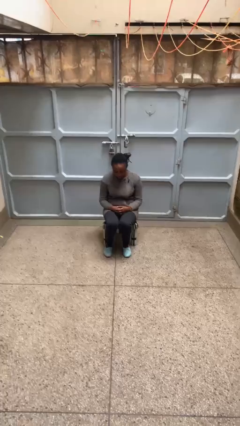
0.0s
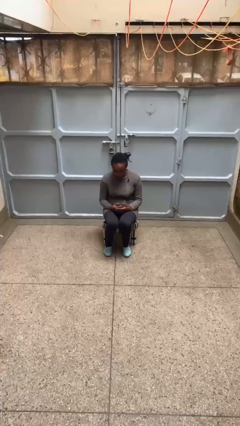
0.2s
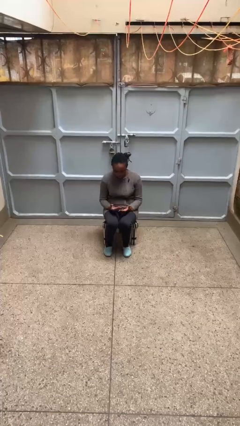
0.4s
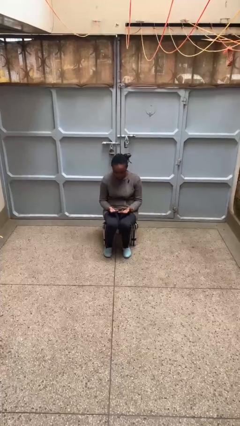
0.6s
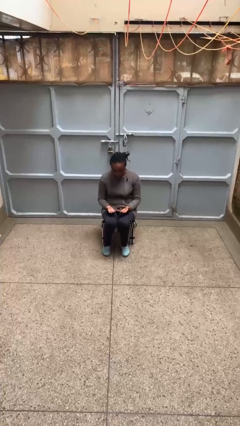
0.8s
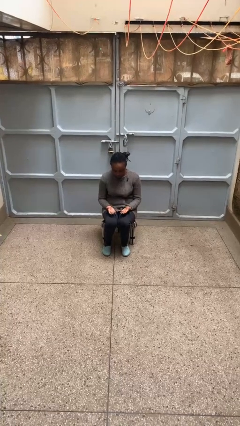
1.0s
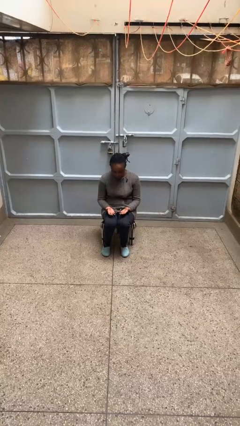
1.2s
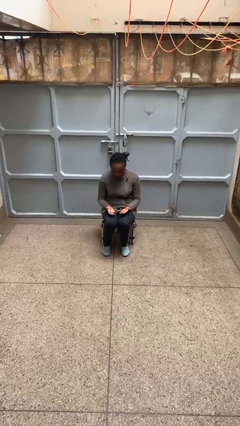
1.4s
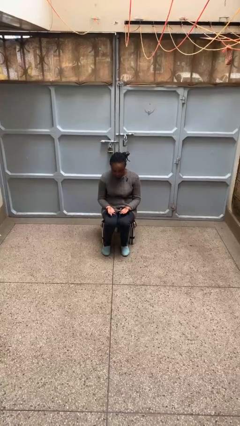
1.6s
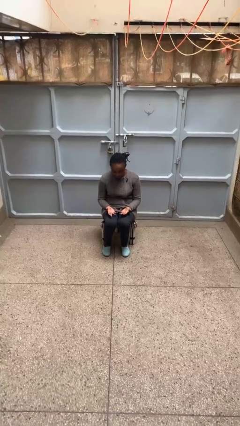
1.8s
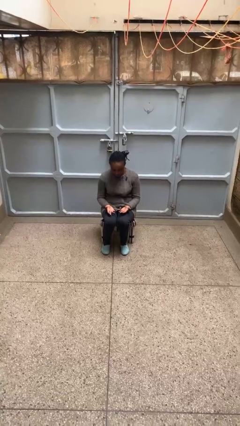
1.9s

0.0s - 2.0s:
person looks at hands in lap

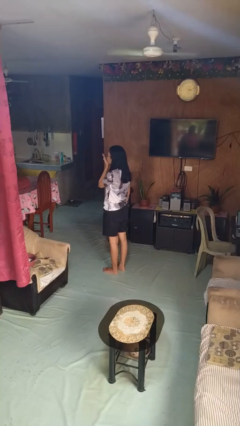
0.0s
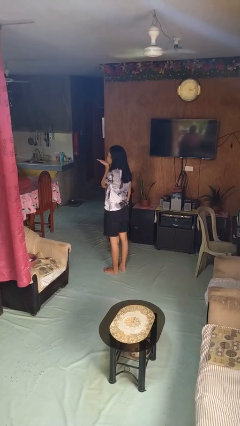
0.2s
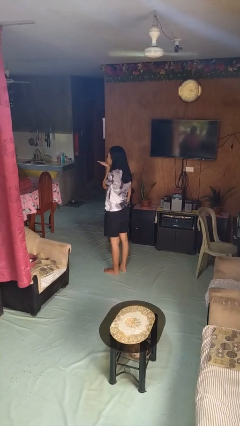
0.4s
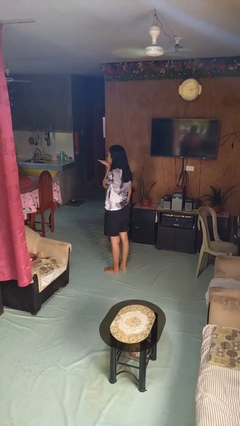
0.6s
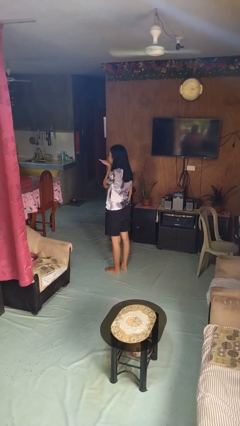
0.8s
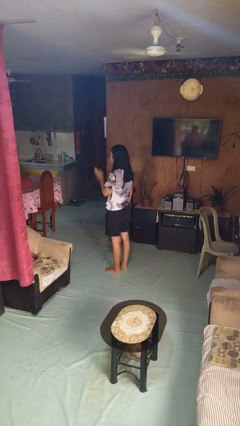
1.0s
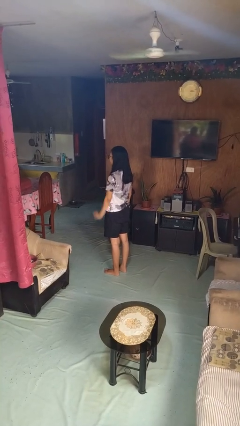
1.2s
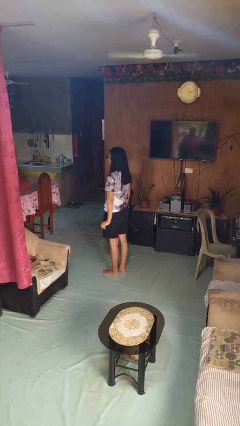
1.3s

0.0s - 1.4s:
person gestures blow kiss

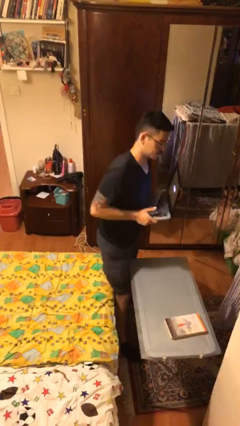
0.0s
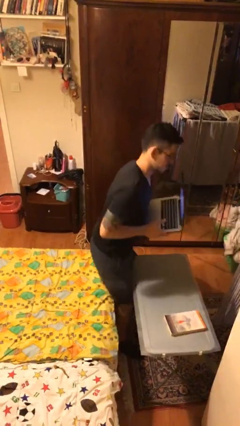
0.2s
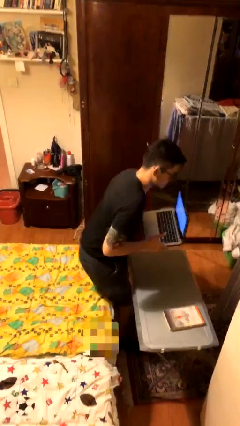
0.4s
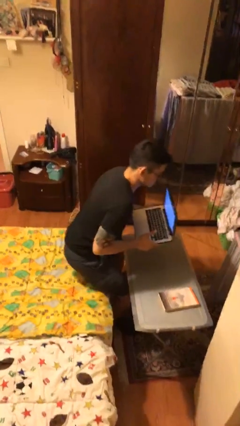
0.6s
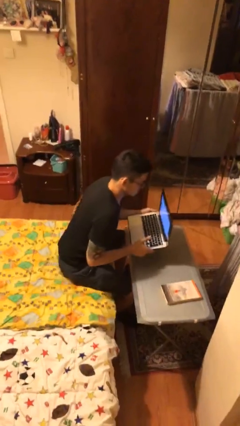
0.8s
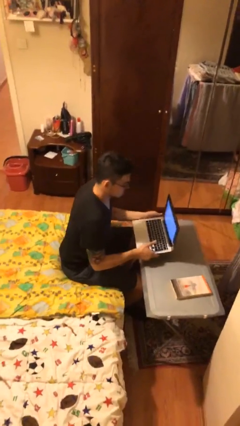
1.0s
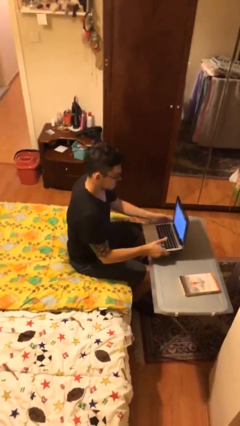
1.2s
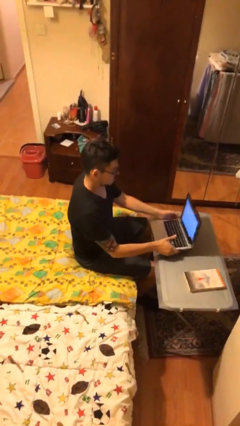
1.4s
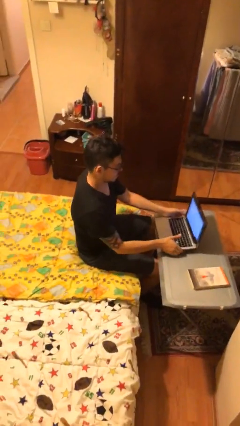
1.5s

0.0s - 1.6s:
person sits down

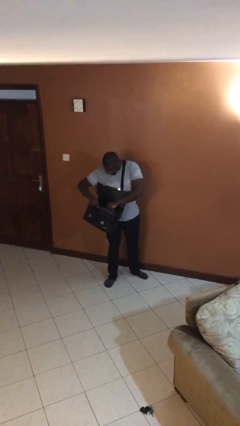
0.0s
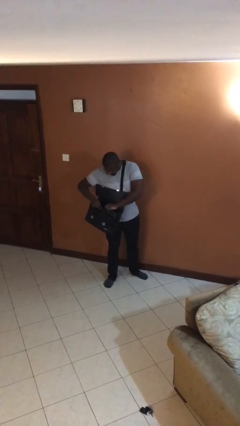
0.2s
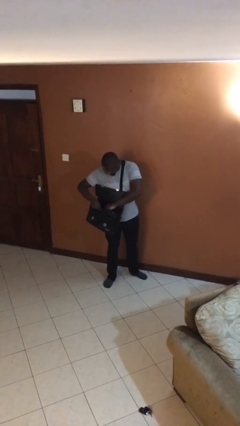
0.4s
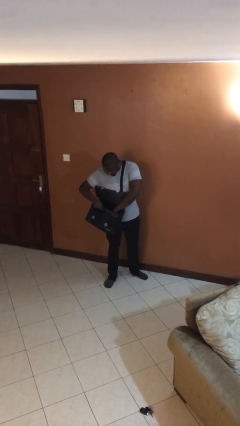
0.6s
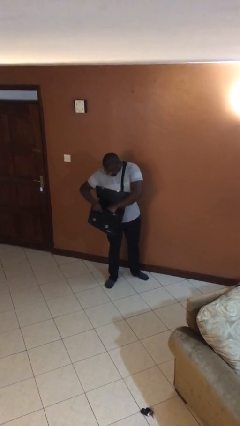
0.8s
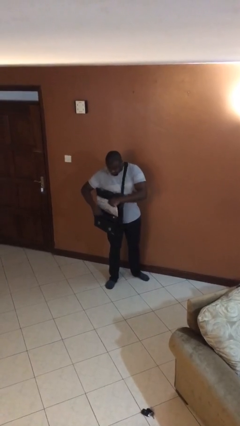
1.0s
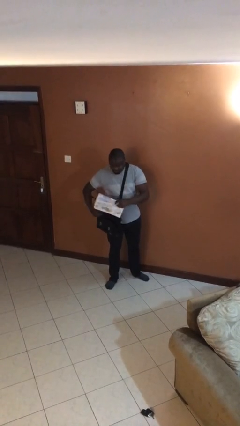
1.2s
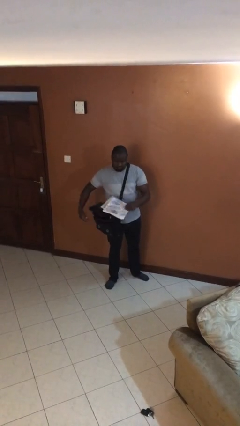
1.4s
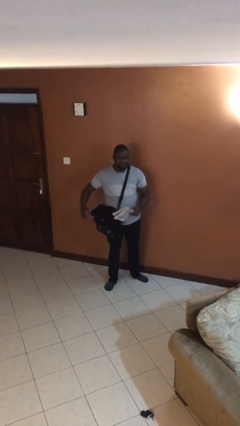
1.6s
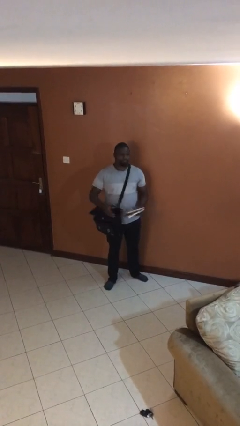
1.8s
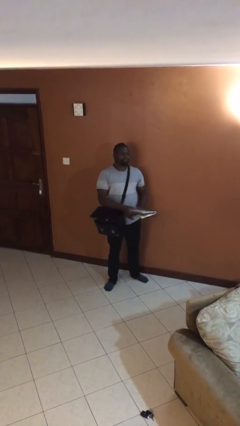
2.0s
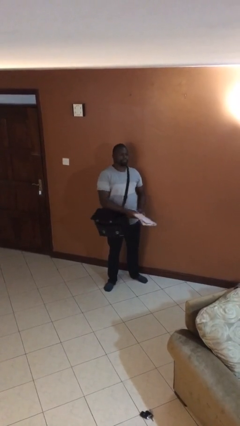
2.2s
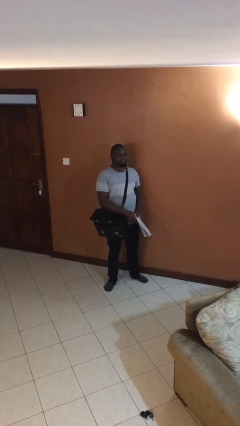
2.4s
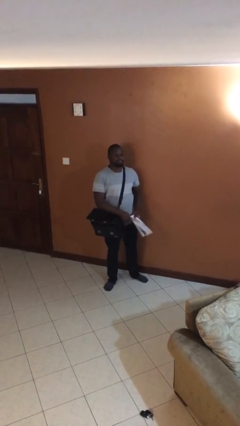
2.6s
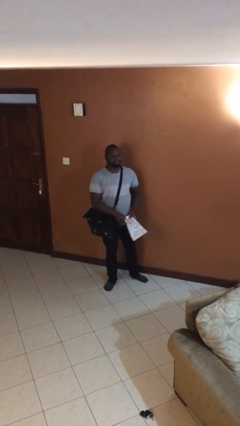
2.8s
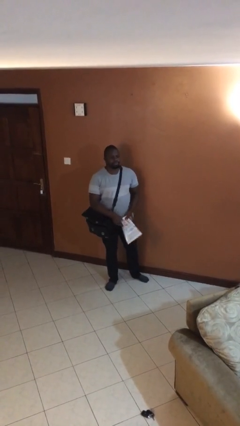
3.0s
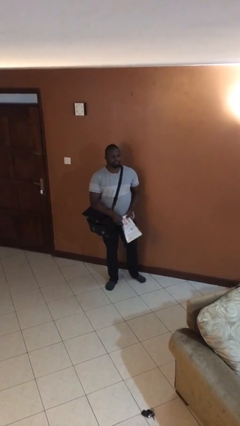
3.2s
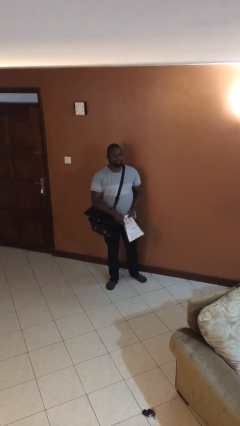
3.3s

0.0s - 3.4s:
person takes object from purse

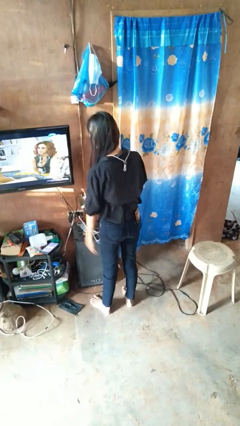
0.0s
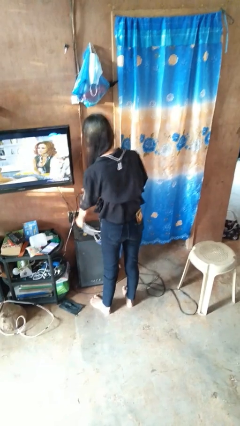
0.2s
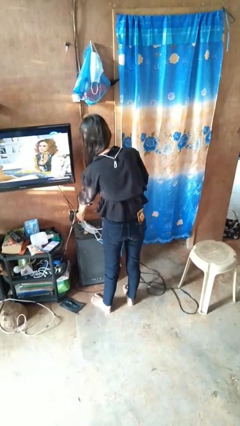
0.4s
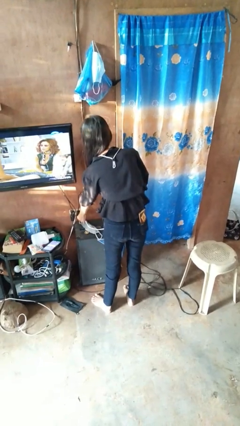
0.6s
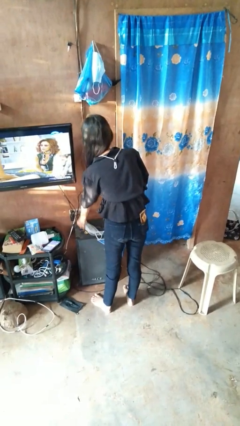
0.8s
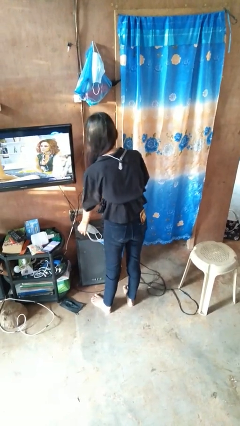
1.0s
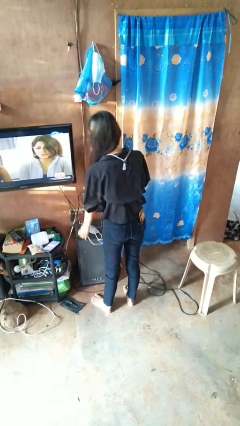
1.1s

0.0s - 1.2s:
person unplugs from electrical socket

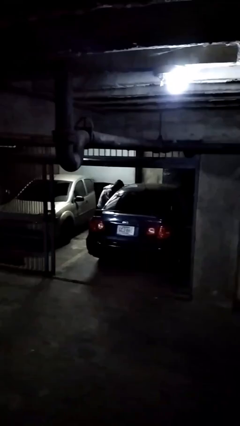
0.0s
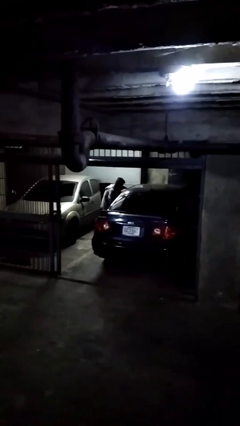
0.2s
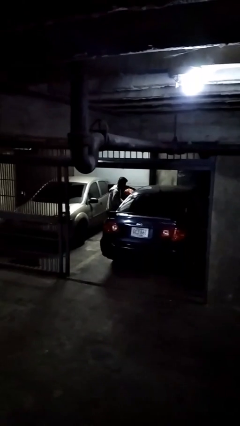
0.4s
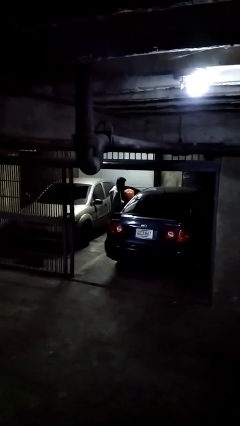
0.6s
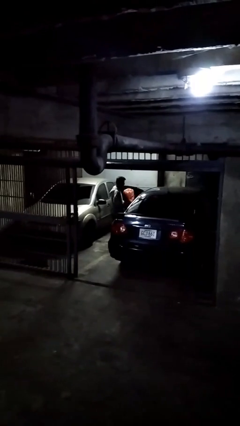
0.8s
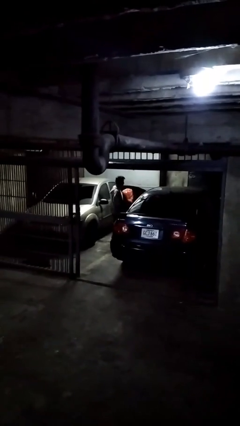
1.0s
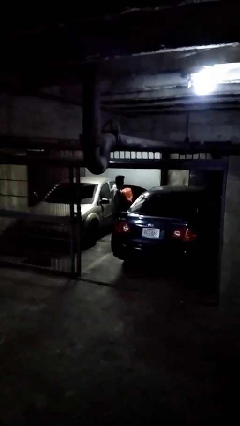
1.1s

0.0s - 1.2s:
person unloads car

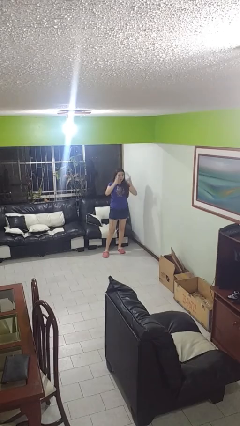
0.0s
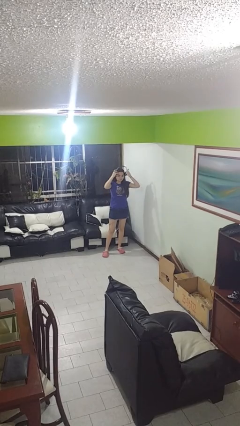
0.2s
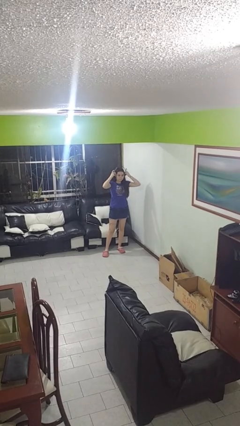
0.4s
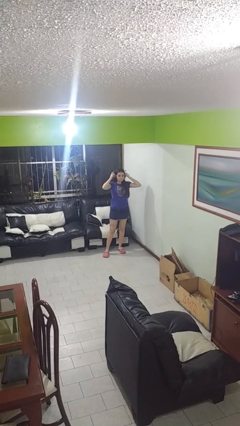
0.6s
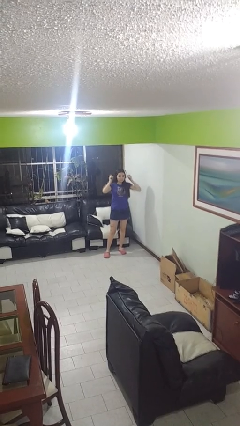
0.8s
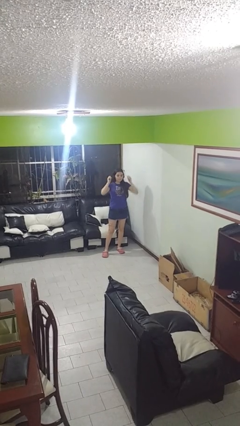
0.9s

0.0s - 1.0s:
person puts on headphones

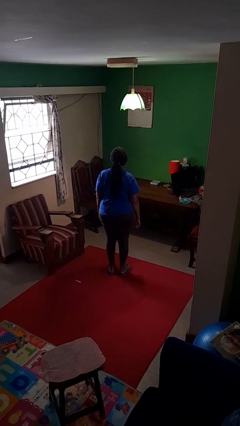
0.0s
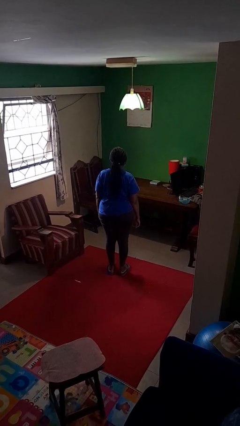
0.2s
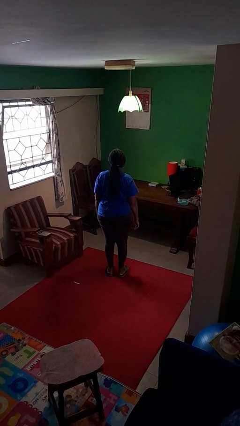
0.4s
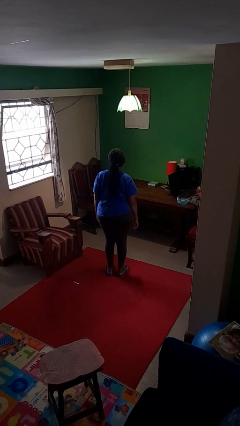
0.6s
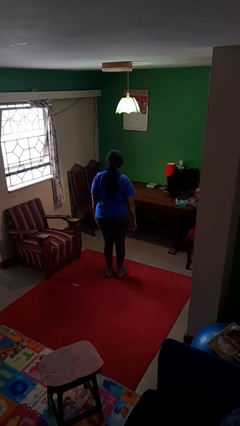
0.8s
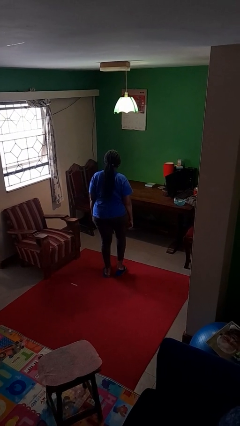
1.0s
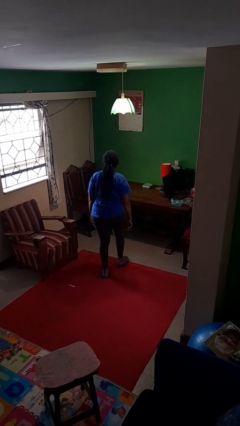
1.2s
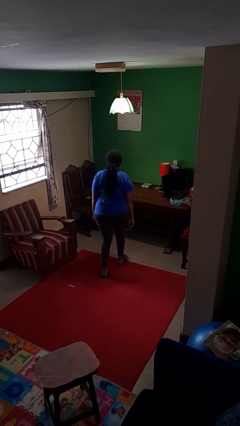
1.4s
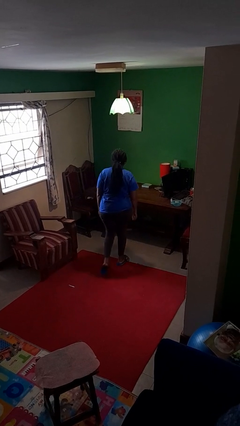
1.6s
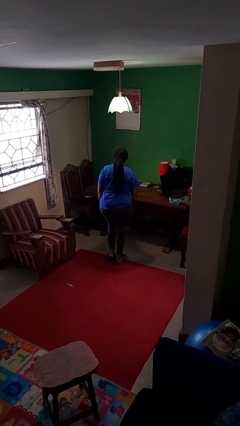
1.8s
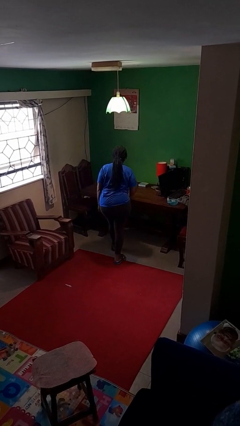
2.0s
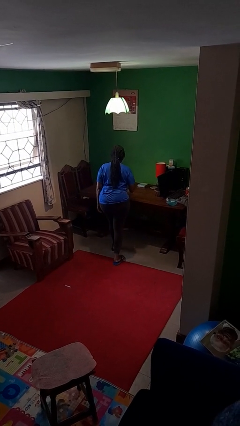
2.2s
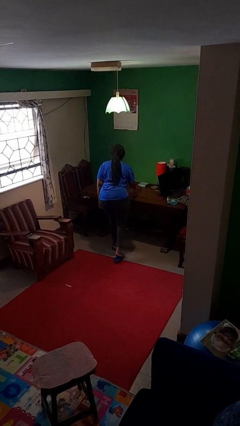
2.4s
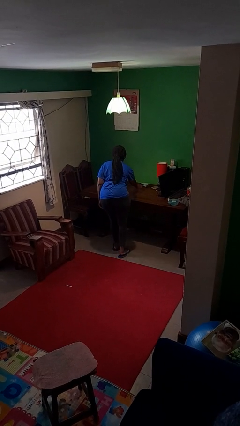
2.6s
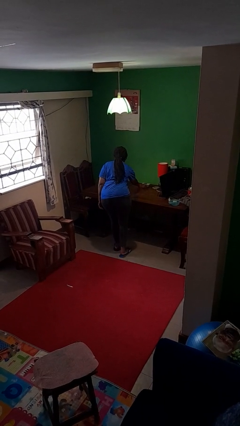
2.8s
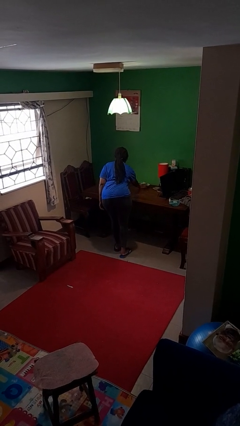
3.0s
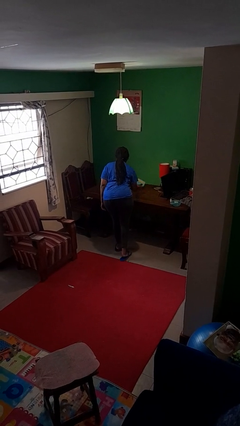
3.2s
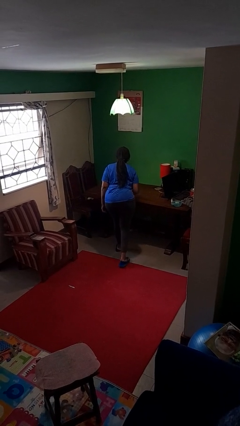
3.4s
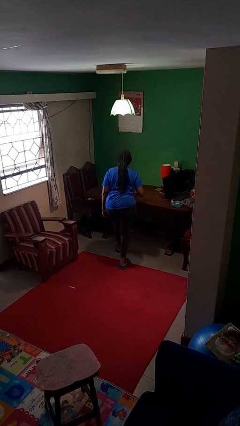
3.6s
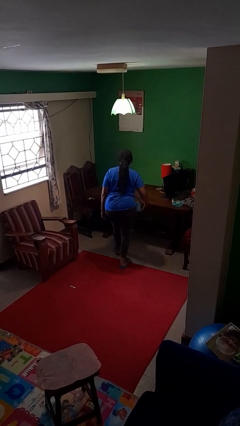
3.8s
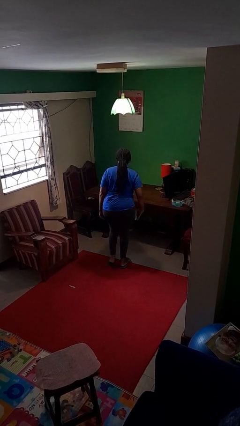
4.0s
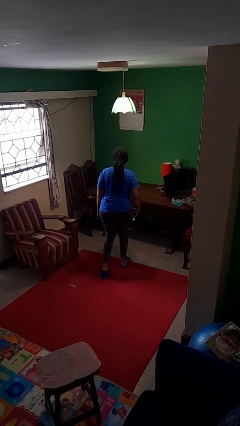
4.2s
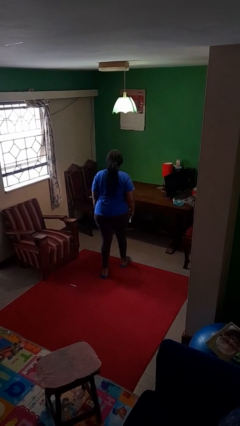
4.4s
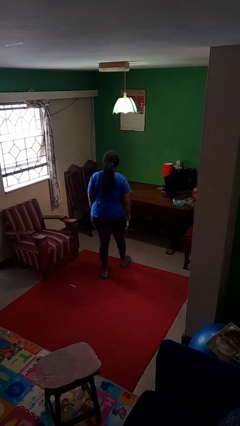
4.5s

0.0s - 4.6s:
person picks up object from table

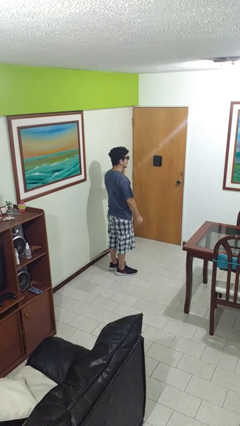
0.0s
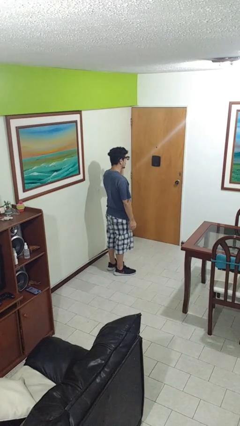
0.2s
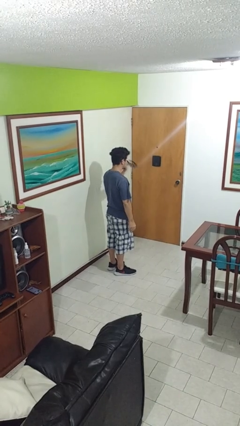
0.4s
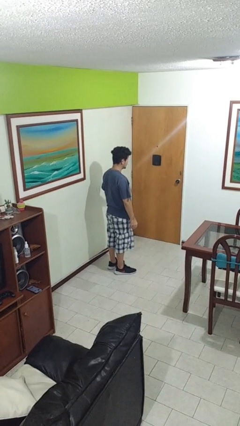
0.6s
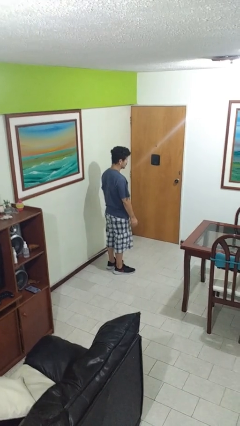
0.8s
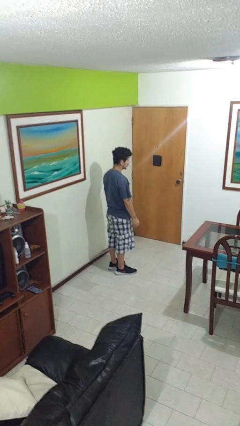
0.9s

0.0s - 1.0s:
person takes off sunglasses
